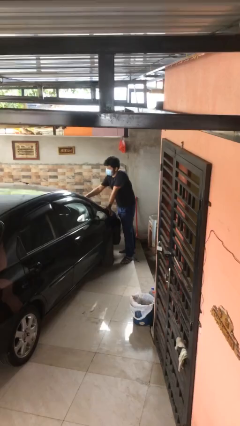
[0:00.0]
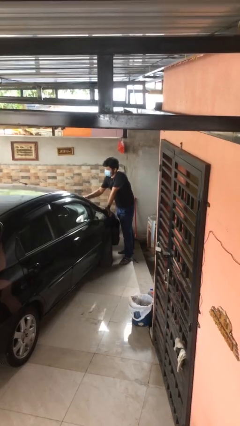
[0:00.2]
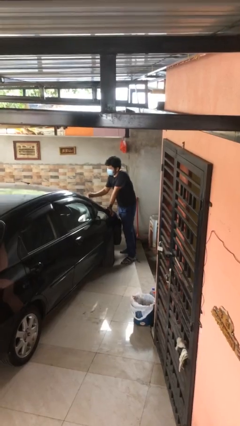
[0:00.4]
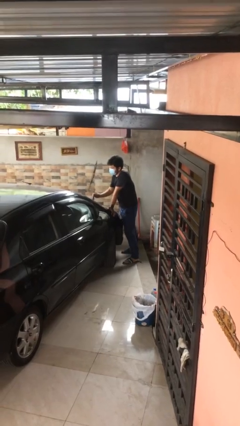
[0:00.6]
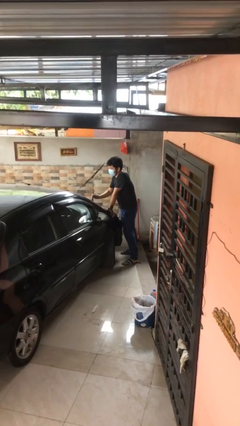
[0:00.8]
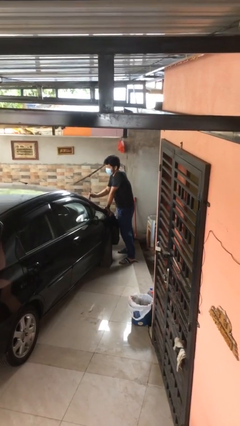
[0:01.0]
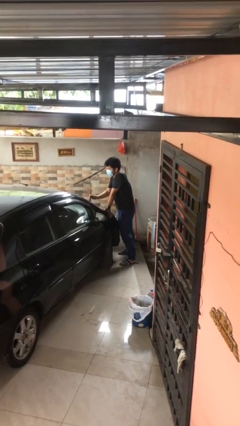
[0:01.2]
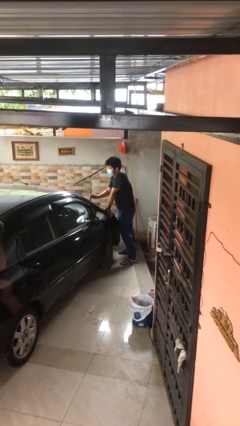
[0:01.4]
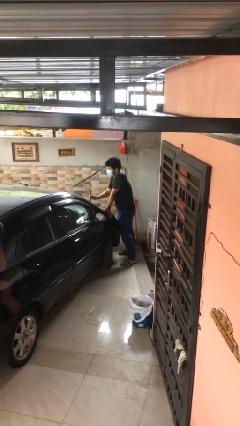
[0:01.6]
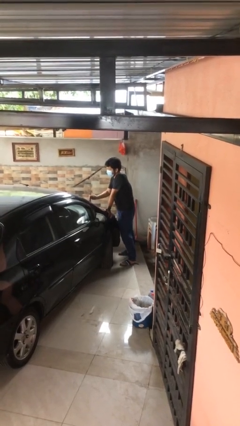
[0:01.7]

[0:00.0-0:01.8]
person flips up car wipers

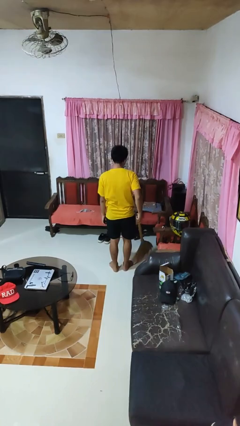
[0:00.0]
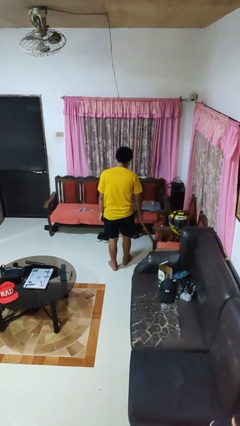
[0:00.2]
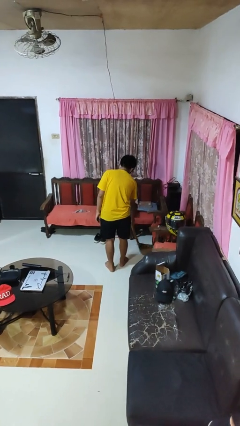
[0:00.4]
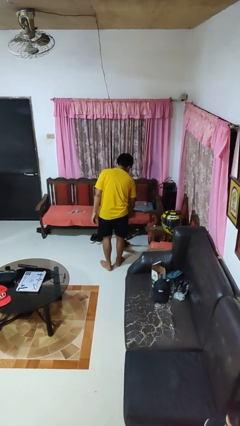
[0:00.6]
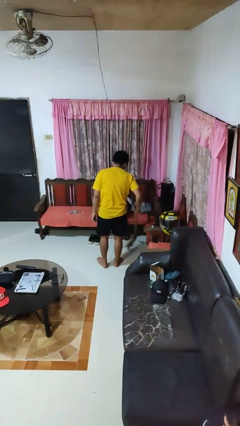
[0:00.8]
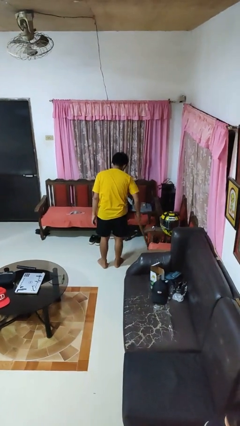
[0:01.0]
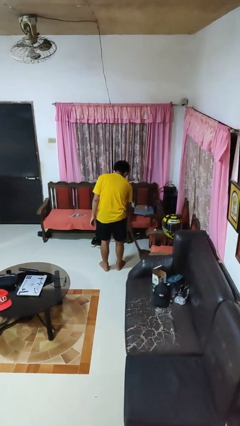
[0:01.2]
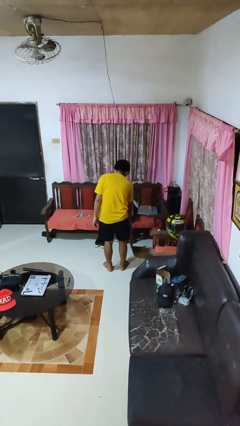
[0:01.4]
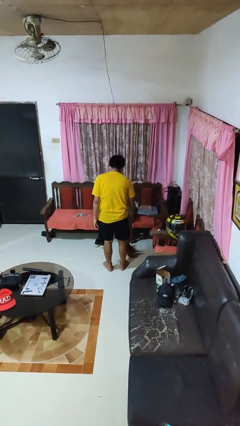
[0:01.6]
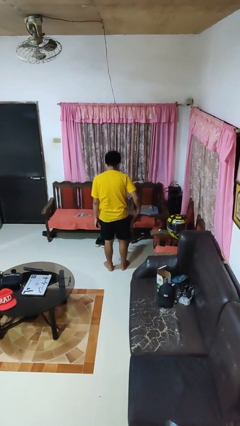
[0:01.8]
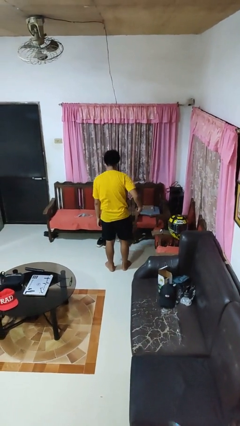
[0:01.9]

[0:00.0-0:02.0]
person sweeps floor

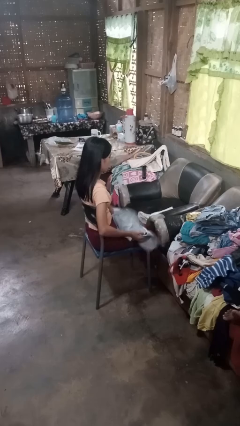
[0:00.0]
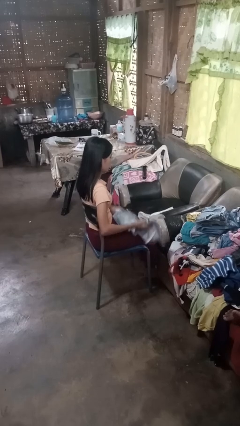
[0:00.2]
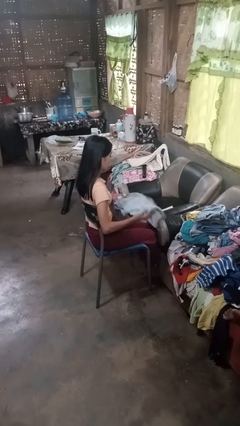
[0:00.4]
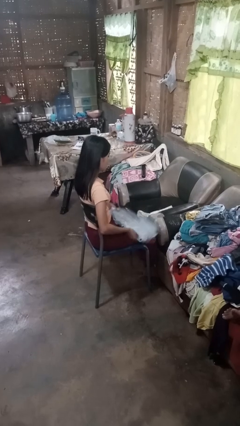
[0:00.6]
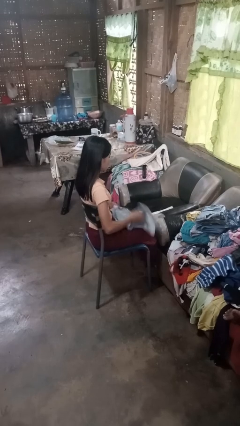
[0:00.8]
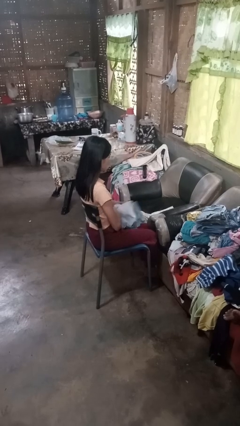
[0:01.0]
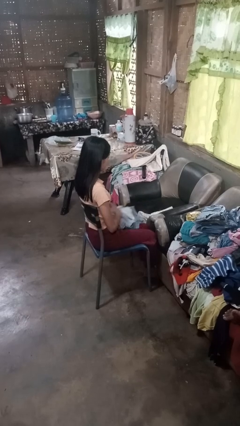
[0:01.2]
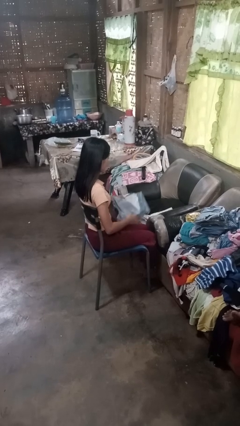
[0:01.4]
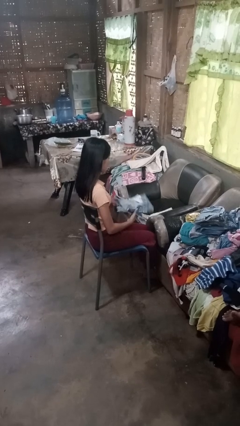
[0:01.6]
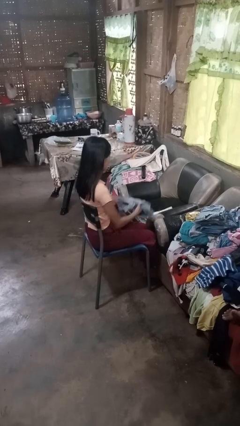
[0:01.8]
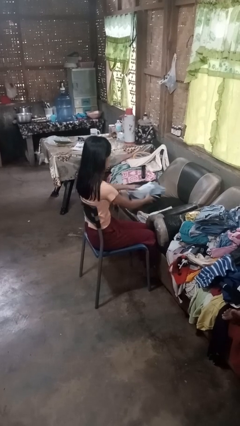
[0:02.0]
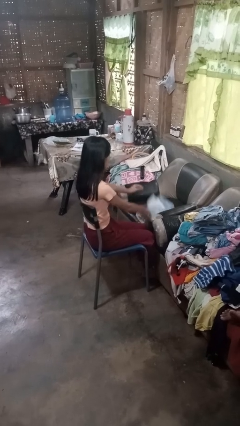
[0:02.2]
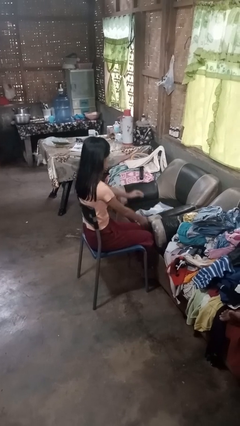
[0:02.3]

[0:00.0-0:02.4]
person folds pants

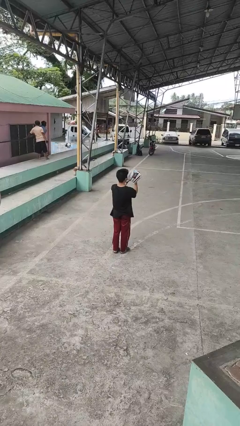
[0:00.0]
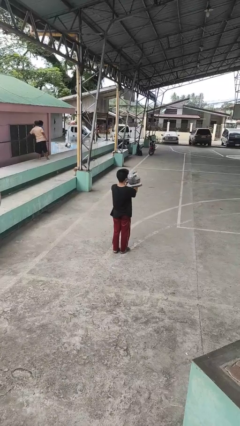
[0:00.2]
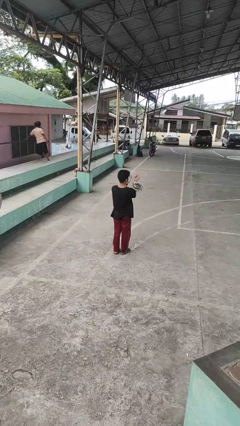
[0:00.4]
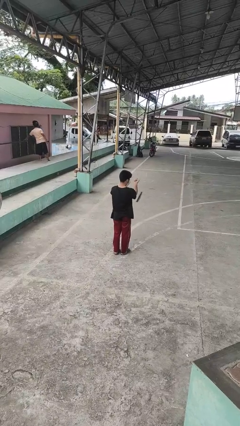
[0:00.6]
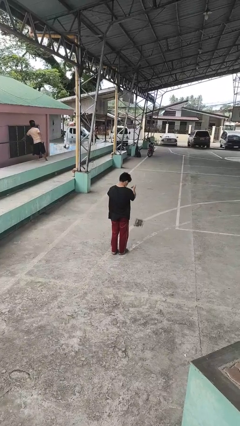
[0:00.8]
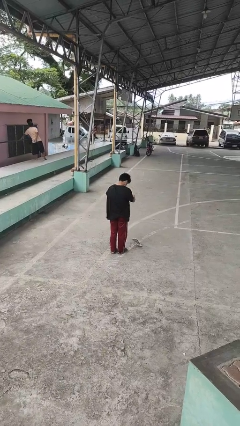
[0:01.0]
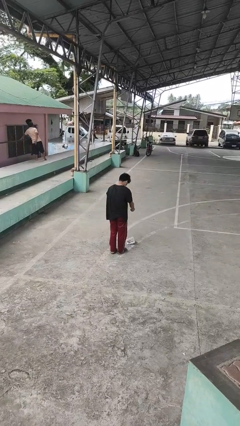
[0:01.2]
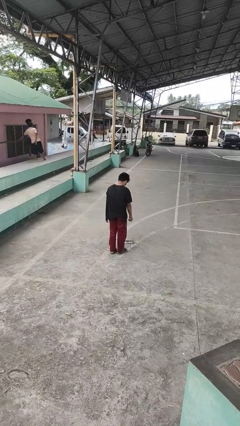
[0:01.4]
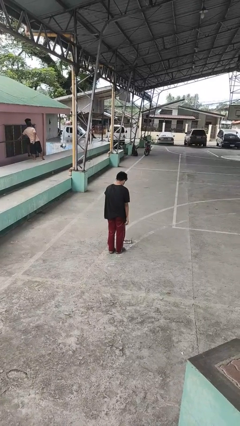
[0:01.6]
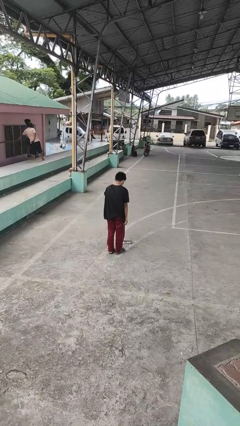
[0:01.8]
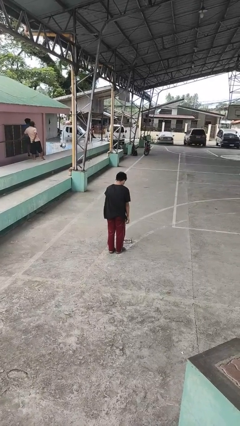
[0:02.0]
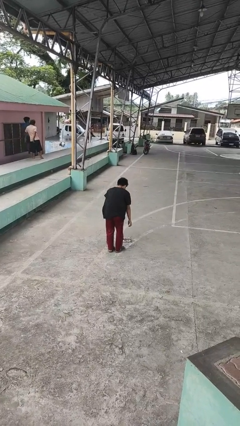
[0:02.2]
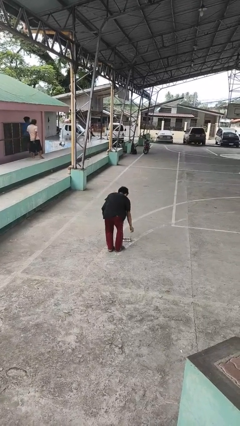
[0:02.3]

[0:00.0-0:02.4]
person drops object

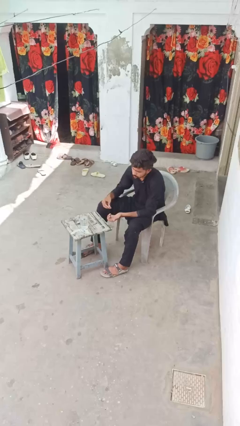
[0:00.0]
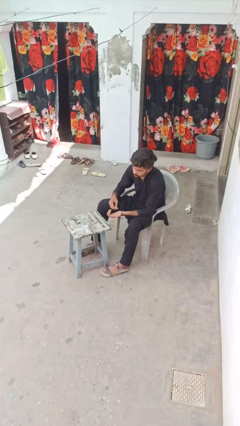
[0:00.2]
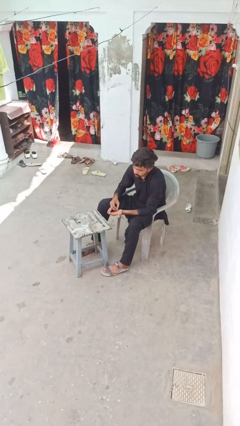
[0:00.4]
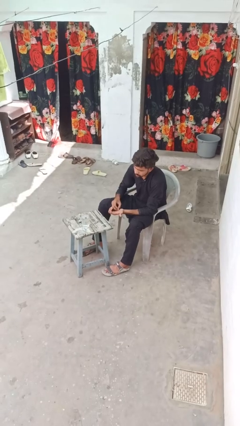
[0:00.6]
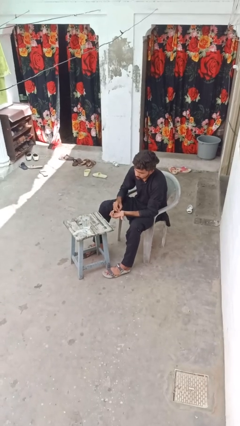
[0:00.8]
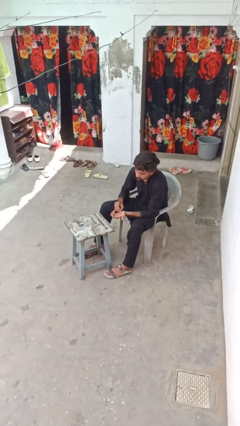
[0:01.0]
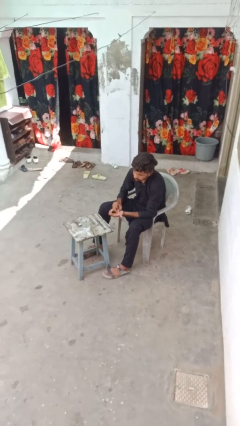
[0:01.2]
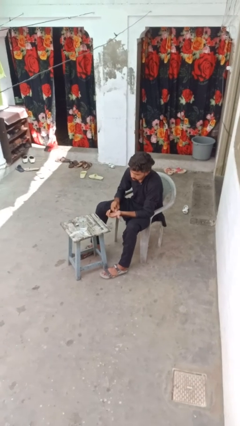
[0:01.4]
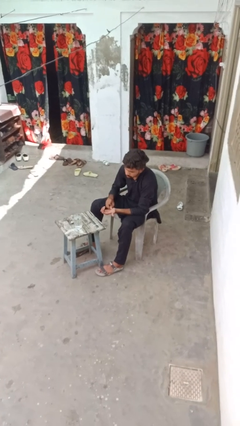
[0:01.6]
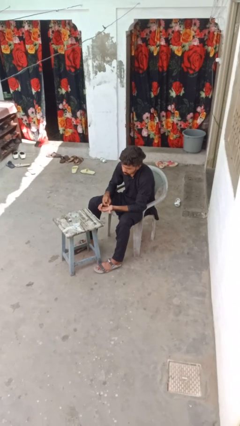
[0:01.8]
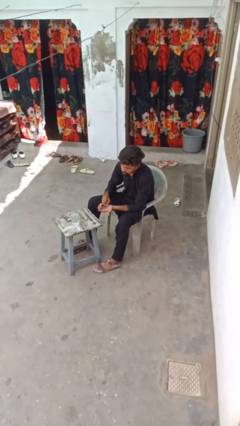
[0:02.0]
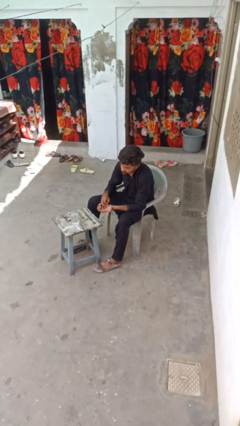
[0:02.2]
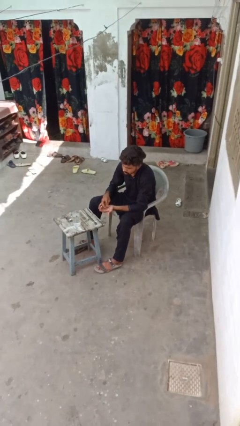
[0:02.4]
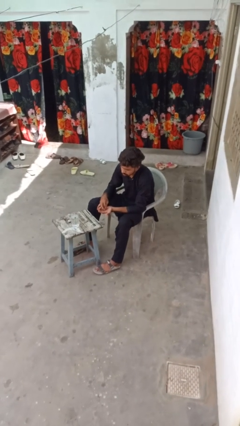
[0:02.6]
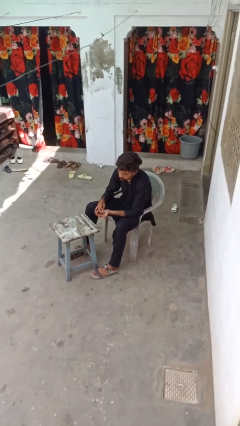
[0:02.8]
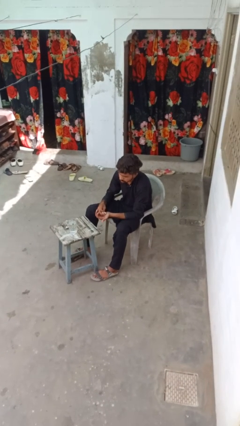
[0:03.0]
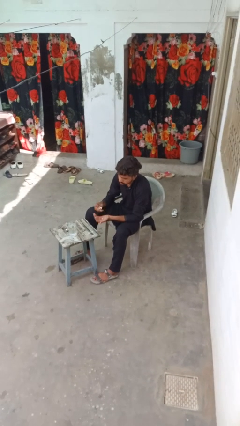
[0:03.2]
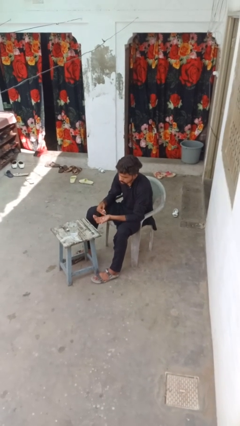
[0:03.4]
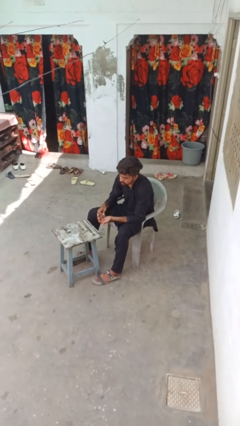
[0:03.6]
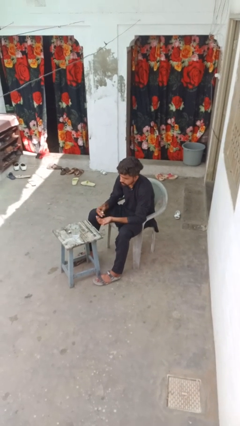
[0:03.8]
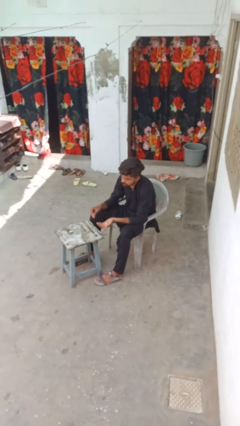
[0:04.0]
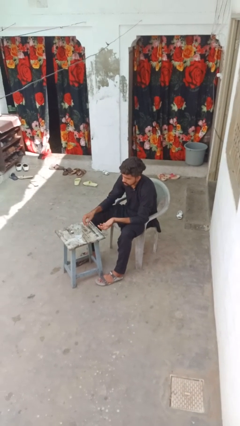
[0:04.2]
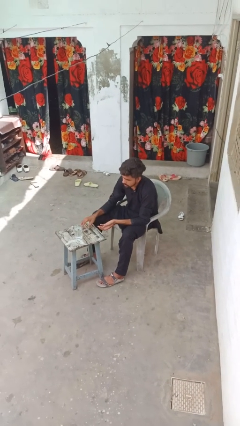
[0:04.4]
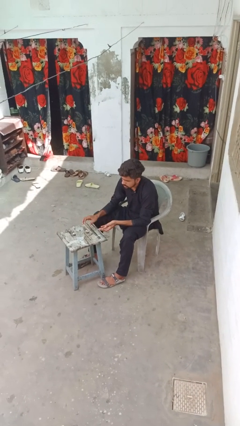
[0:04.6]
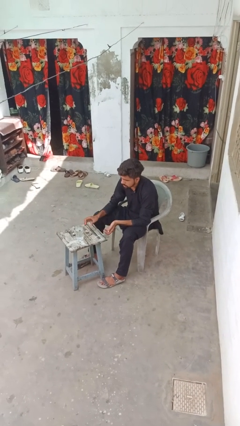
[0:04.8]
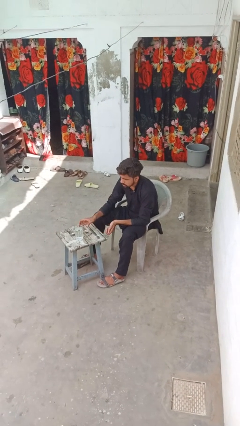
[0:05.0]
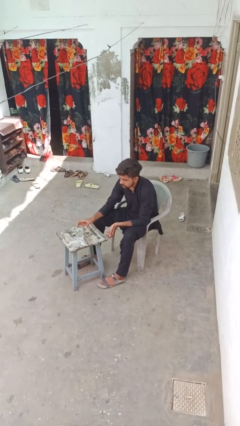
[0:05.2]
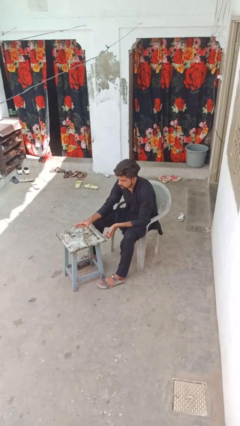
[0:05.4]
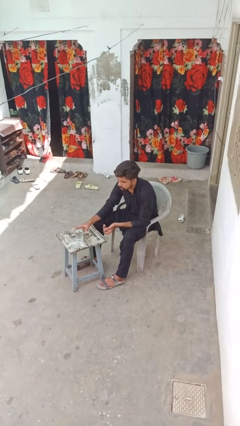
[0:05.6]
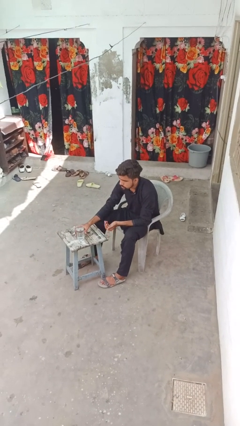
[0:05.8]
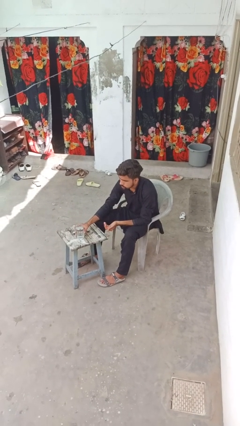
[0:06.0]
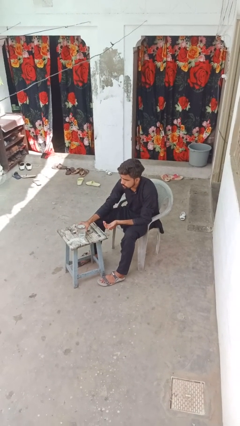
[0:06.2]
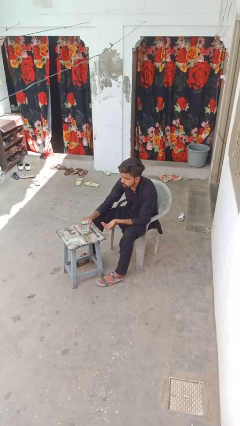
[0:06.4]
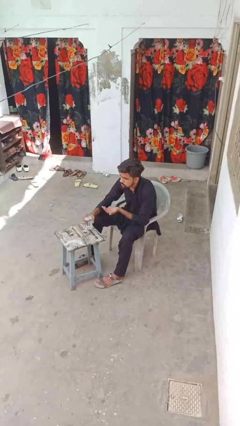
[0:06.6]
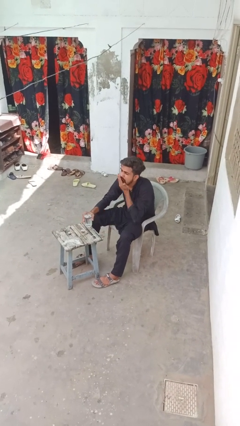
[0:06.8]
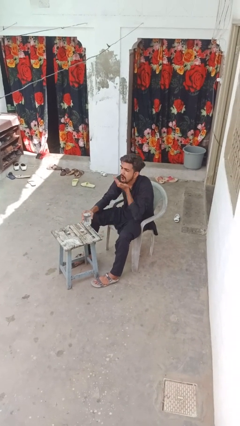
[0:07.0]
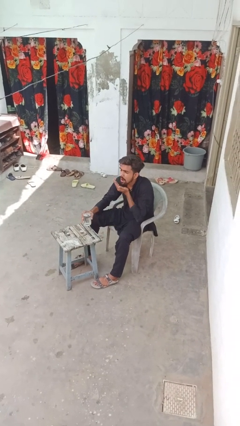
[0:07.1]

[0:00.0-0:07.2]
person takes medicine pills

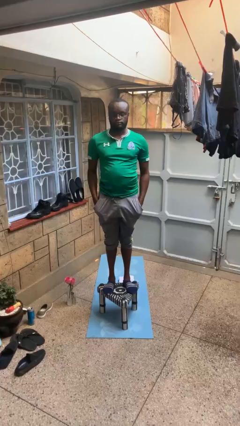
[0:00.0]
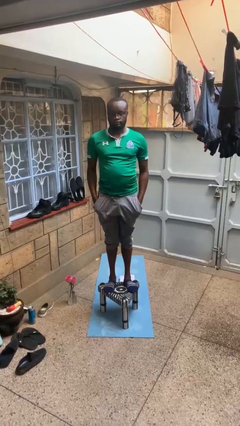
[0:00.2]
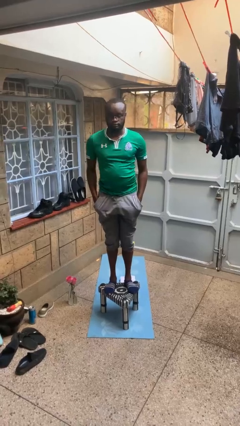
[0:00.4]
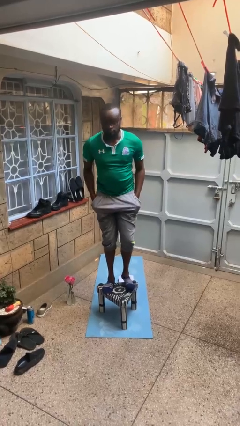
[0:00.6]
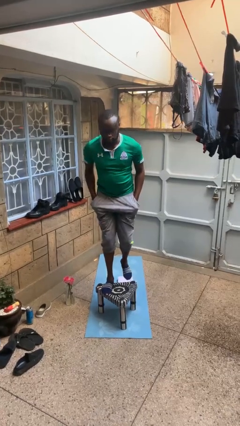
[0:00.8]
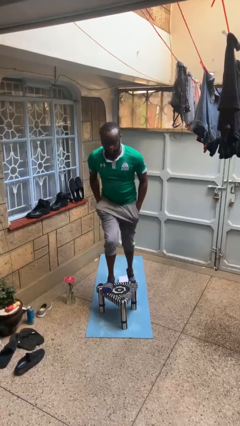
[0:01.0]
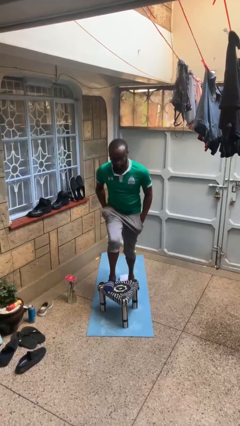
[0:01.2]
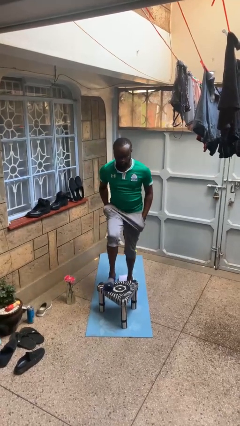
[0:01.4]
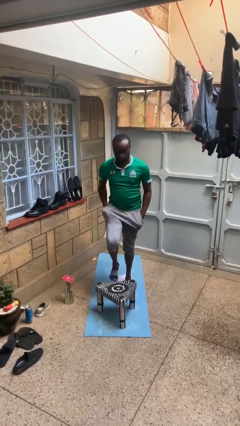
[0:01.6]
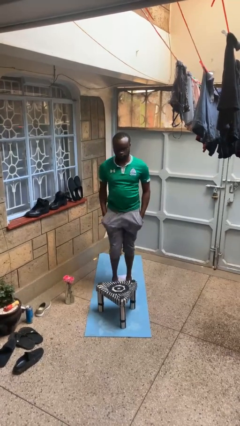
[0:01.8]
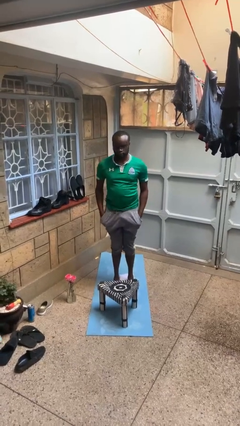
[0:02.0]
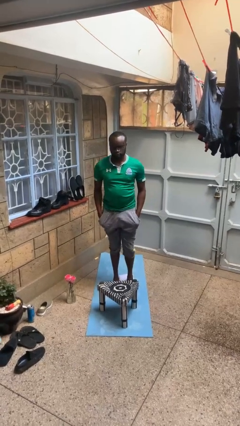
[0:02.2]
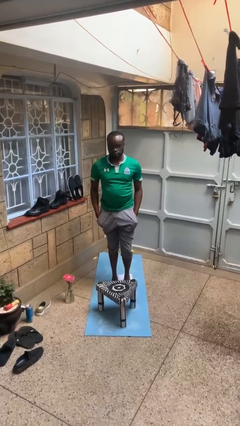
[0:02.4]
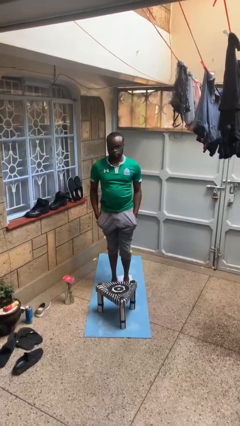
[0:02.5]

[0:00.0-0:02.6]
person climbs off table
